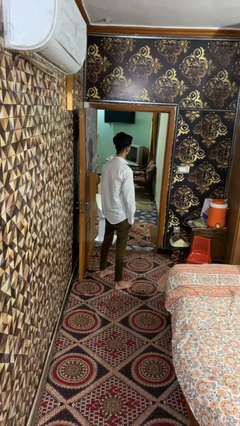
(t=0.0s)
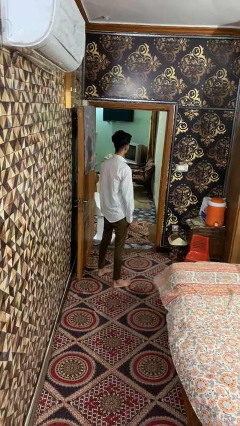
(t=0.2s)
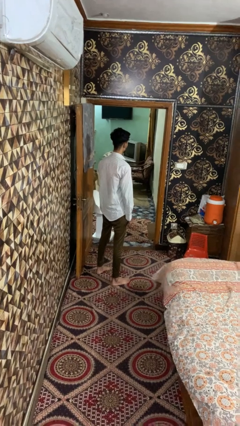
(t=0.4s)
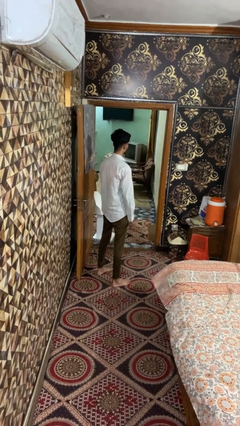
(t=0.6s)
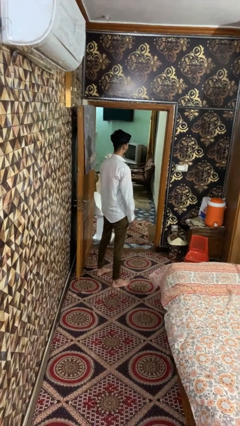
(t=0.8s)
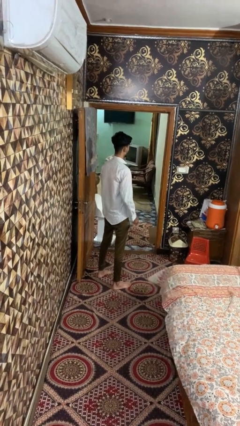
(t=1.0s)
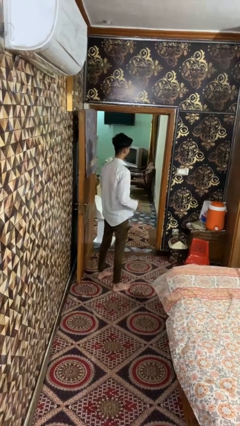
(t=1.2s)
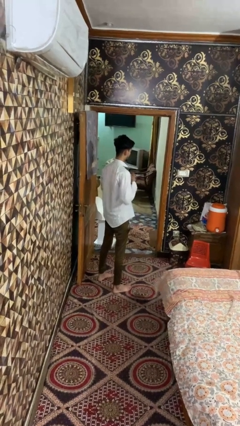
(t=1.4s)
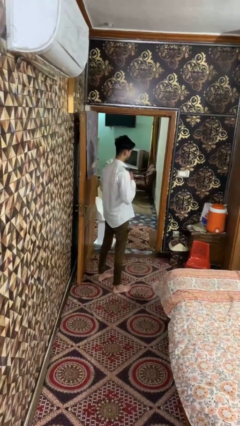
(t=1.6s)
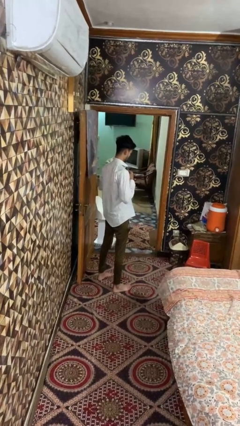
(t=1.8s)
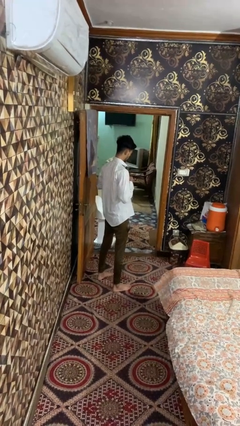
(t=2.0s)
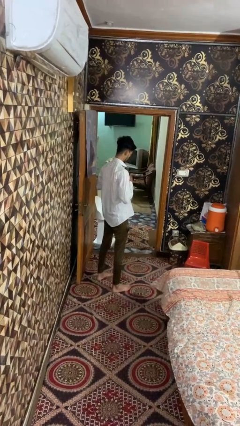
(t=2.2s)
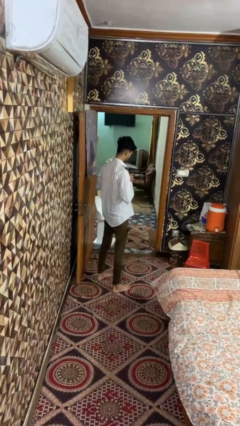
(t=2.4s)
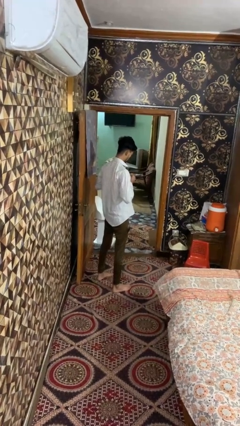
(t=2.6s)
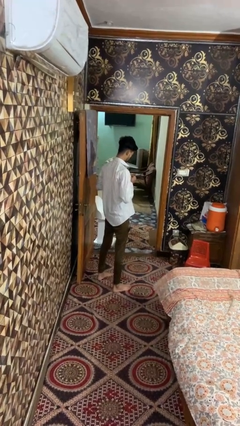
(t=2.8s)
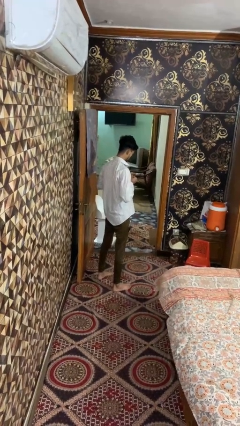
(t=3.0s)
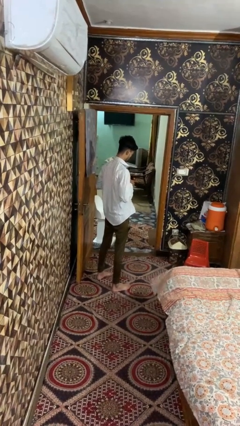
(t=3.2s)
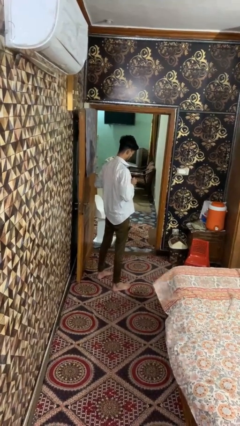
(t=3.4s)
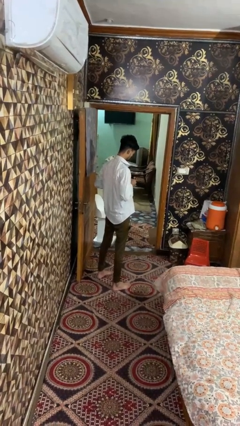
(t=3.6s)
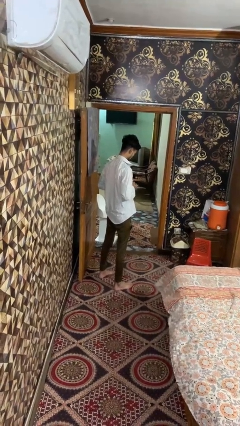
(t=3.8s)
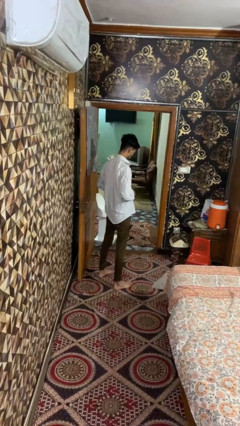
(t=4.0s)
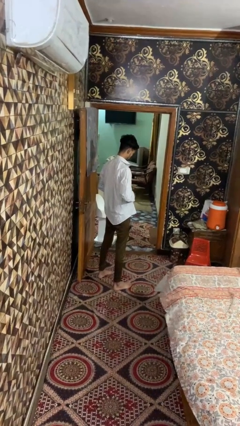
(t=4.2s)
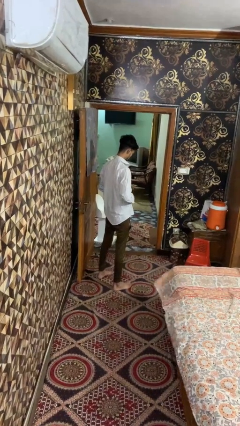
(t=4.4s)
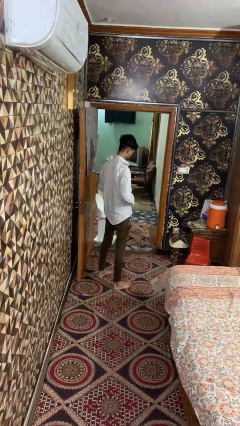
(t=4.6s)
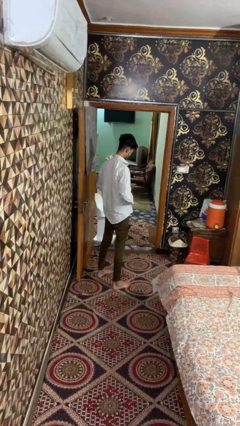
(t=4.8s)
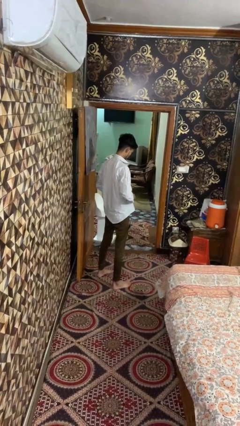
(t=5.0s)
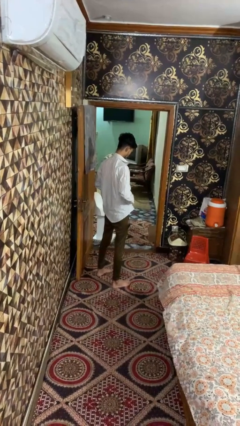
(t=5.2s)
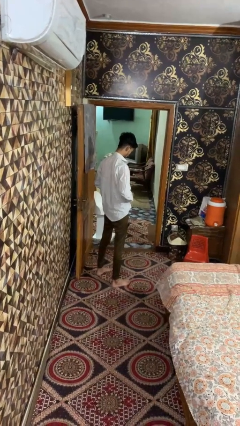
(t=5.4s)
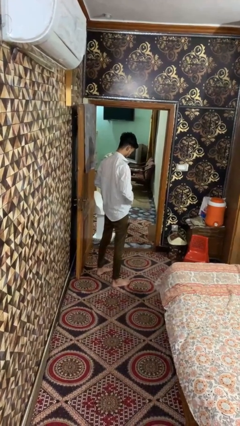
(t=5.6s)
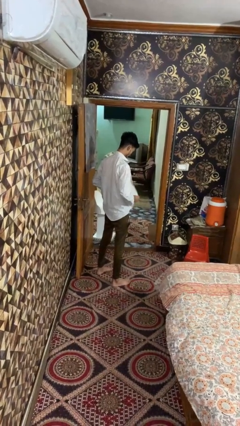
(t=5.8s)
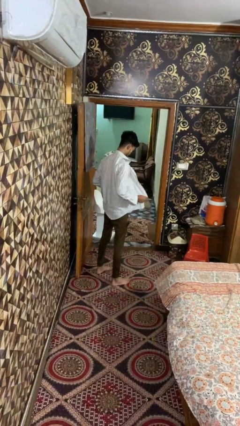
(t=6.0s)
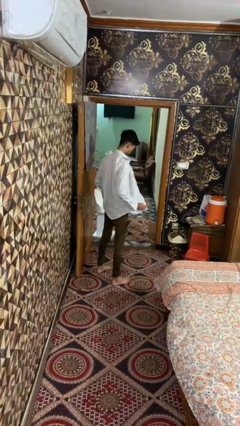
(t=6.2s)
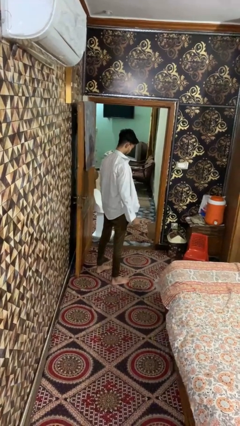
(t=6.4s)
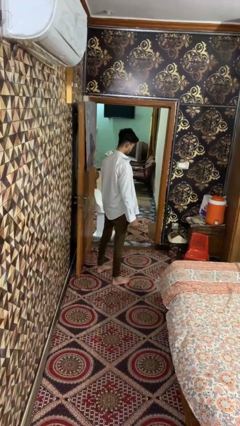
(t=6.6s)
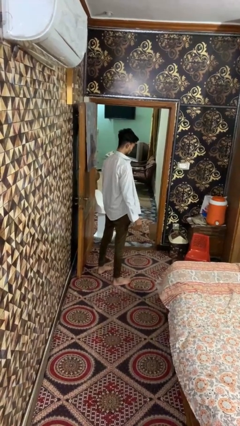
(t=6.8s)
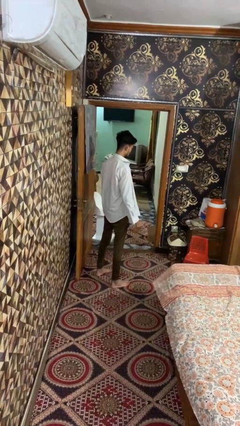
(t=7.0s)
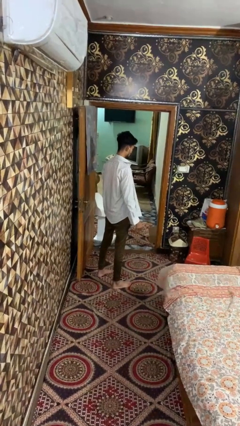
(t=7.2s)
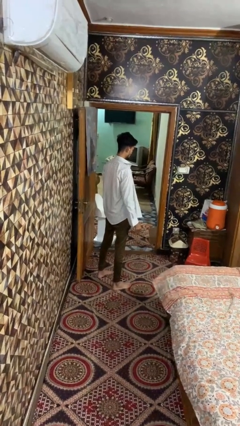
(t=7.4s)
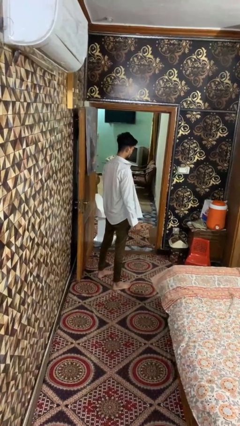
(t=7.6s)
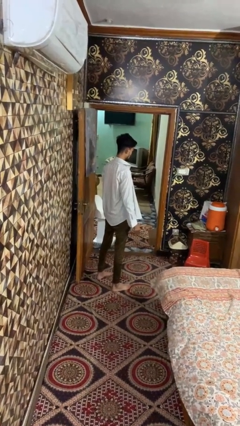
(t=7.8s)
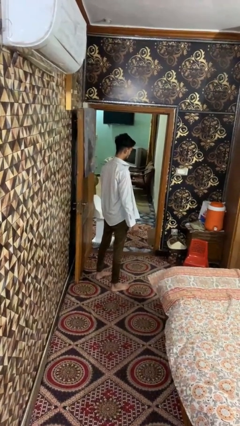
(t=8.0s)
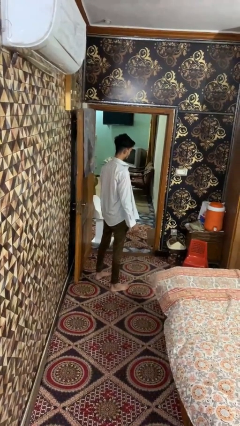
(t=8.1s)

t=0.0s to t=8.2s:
person unbuttons shirt

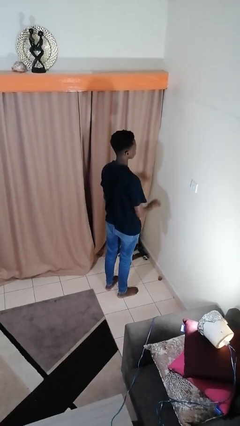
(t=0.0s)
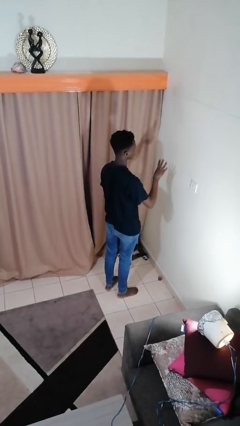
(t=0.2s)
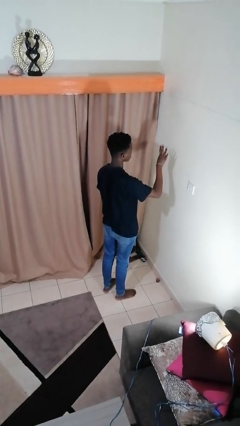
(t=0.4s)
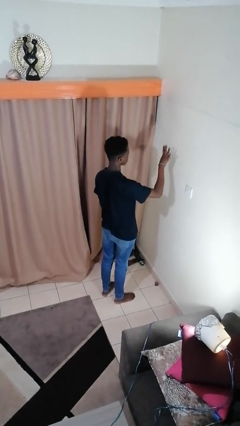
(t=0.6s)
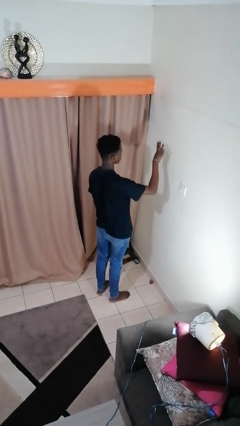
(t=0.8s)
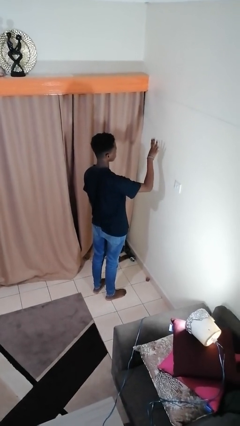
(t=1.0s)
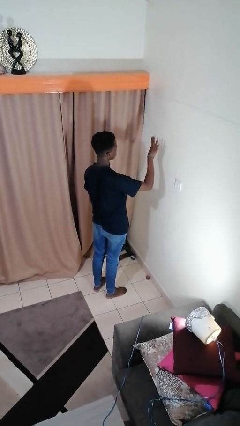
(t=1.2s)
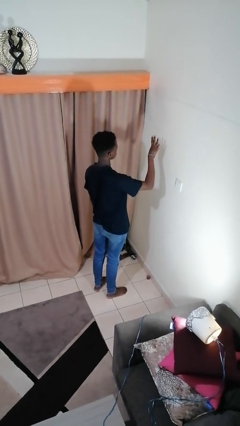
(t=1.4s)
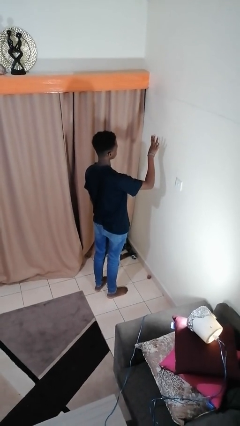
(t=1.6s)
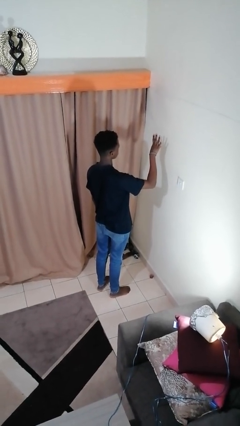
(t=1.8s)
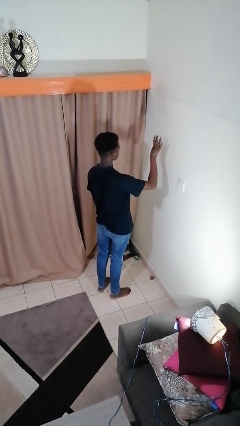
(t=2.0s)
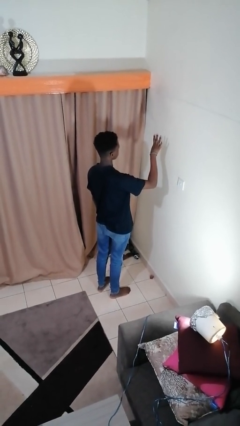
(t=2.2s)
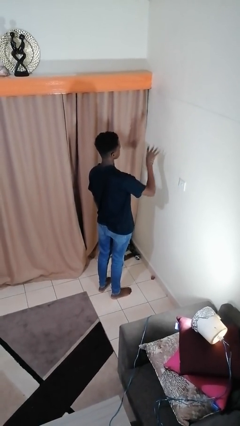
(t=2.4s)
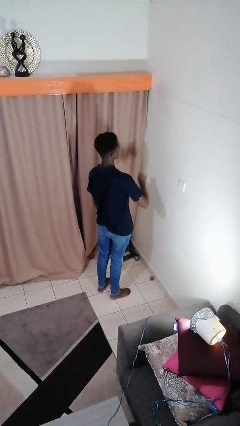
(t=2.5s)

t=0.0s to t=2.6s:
person gestures number four

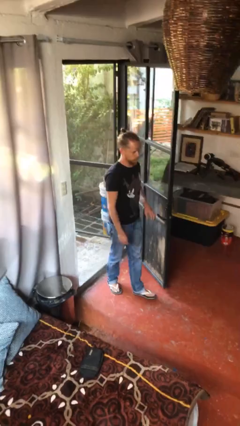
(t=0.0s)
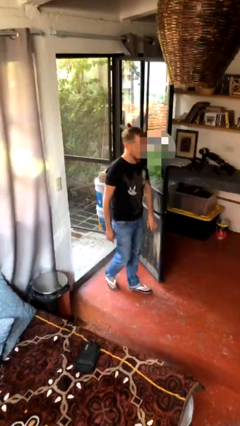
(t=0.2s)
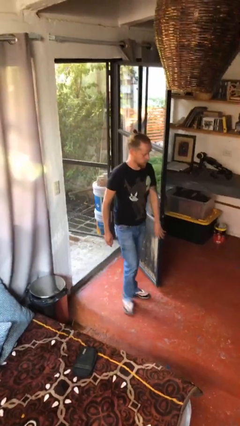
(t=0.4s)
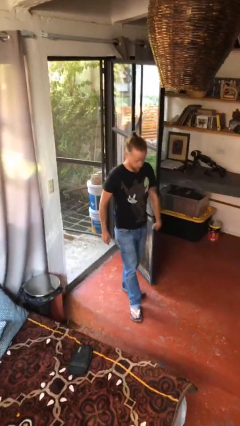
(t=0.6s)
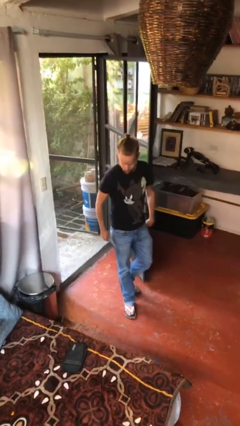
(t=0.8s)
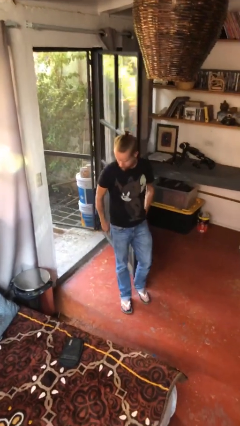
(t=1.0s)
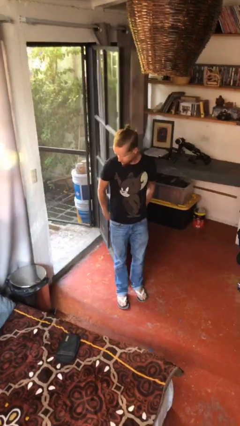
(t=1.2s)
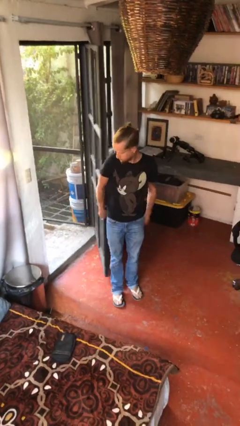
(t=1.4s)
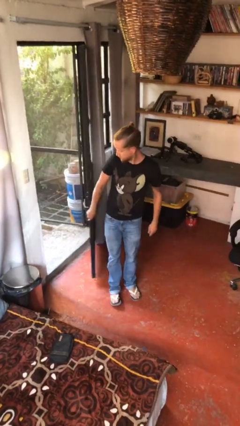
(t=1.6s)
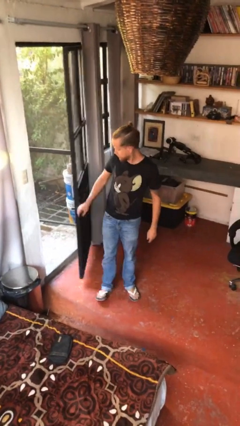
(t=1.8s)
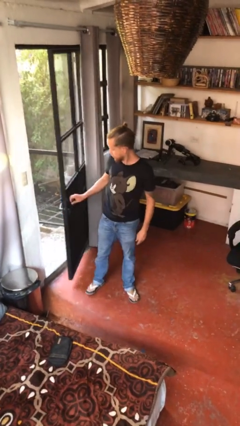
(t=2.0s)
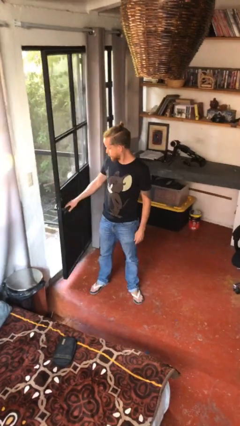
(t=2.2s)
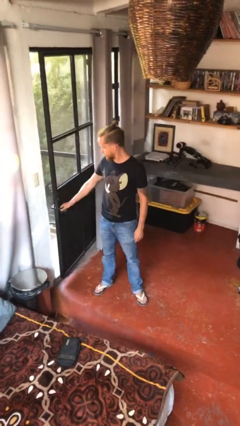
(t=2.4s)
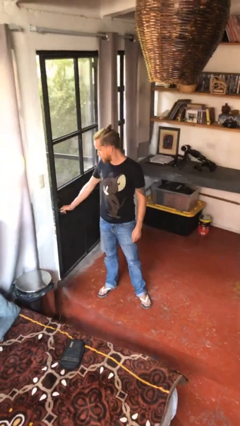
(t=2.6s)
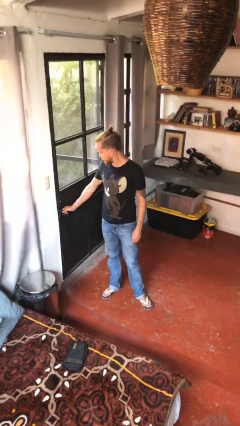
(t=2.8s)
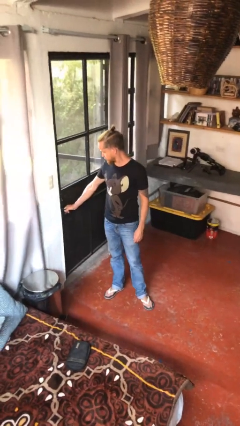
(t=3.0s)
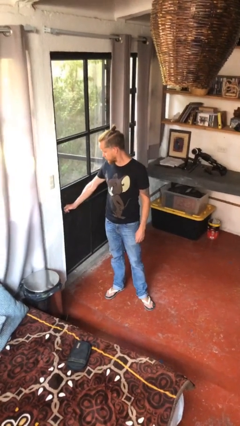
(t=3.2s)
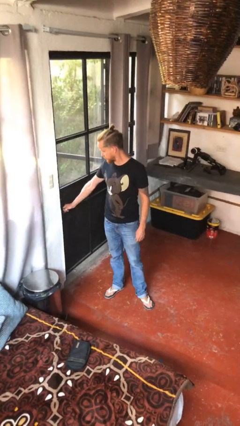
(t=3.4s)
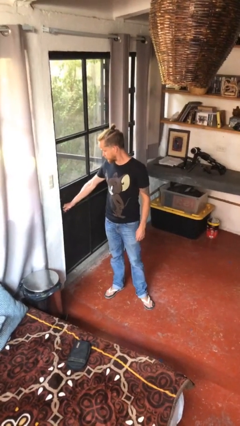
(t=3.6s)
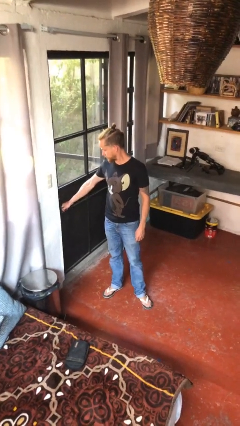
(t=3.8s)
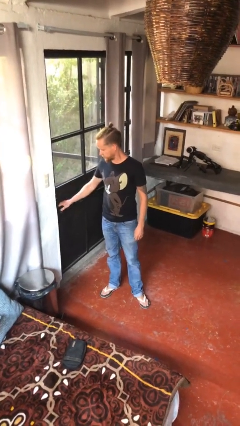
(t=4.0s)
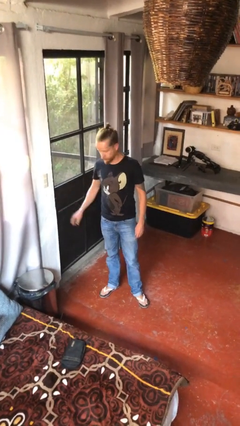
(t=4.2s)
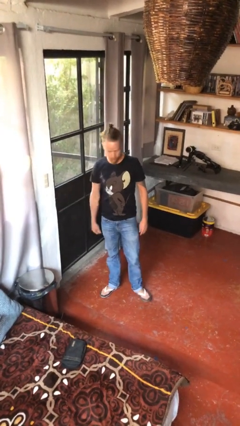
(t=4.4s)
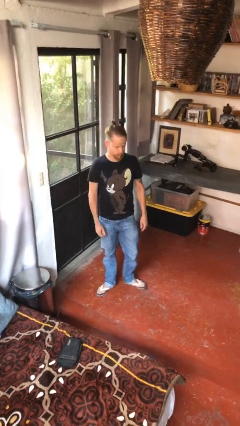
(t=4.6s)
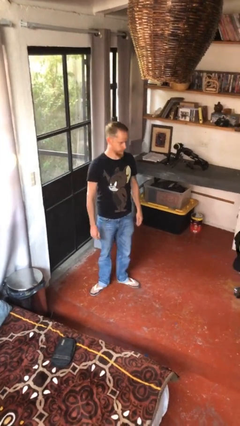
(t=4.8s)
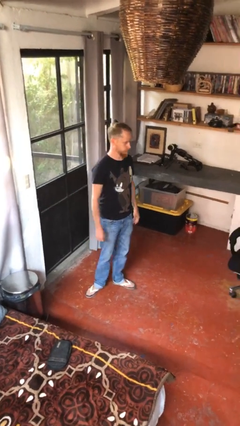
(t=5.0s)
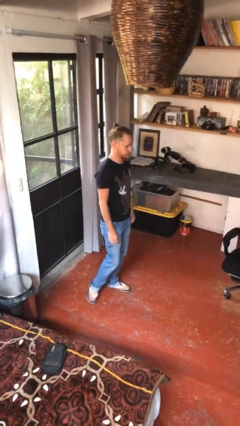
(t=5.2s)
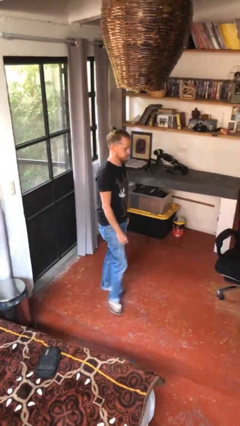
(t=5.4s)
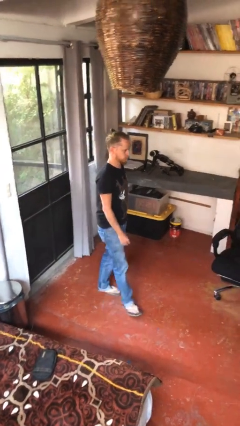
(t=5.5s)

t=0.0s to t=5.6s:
person closes facility door

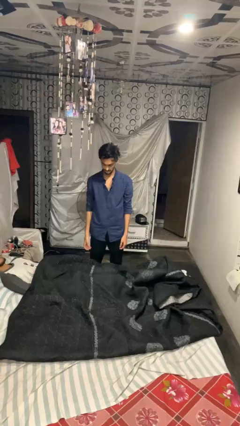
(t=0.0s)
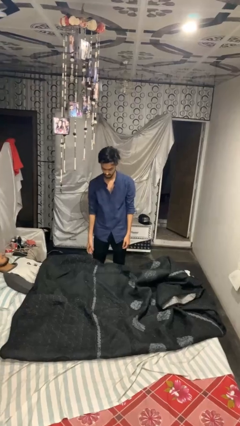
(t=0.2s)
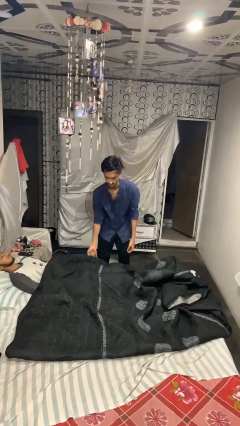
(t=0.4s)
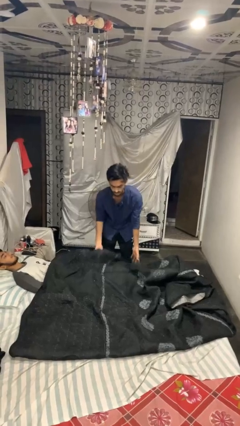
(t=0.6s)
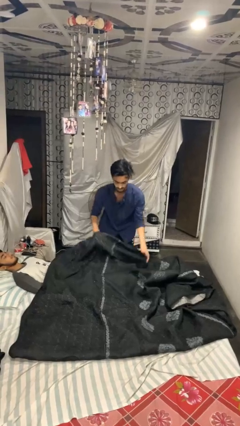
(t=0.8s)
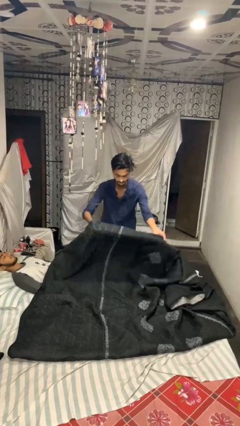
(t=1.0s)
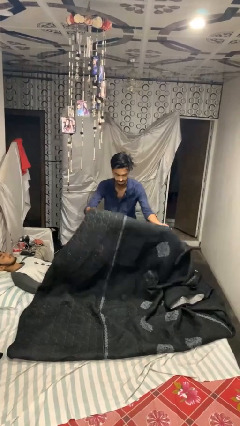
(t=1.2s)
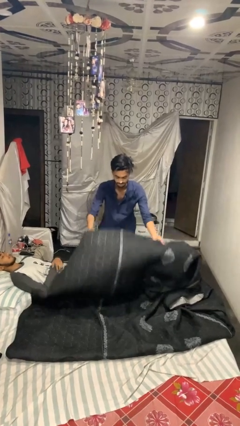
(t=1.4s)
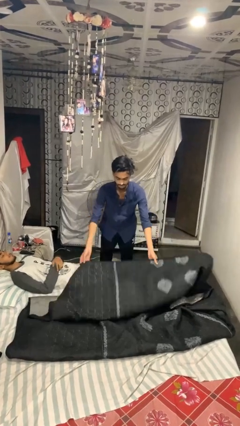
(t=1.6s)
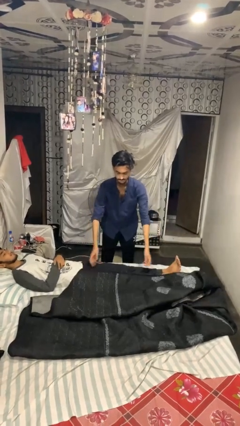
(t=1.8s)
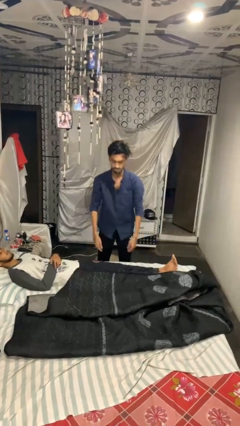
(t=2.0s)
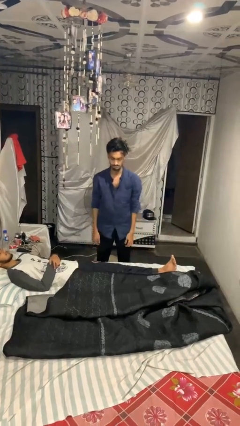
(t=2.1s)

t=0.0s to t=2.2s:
person uncovers friend with blanket
